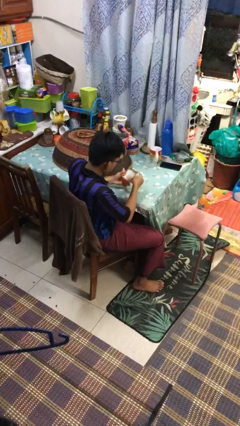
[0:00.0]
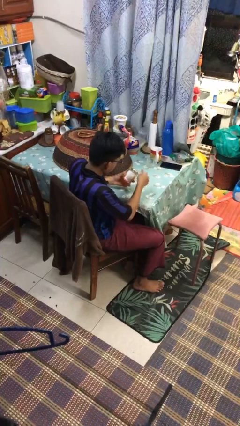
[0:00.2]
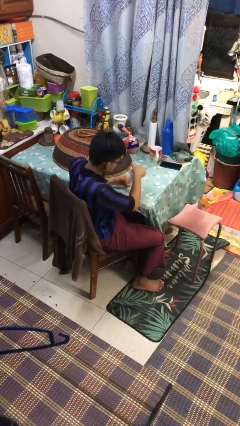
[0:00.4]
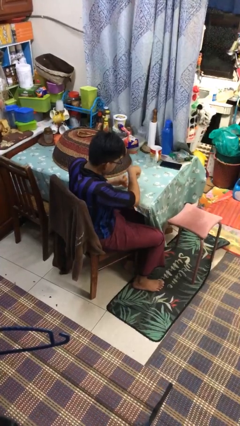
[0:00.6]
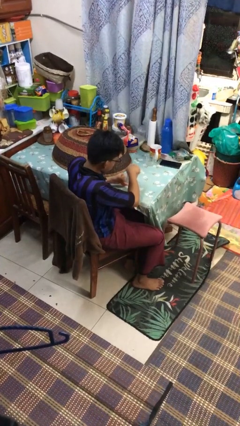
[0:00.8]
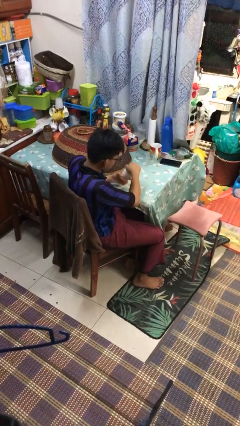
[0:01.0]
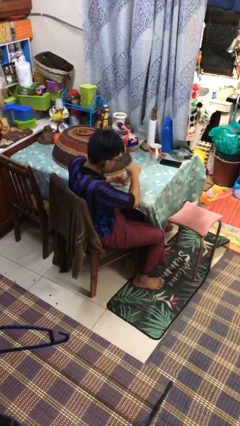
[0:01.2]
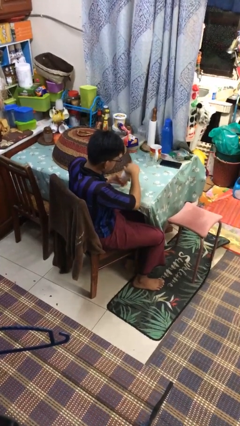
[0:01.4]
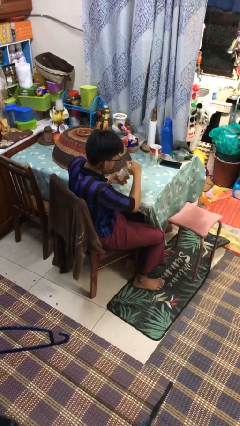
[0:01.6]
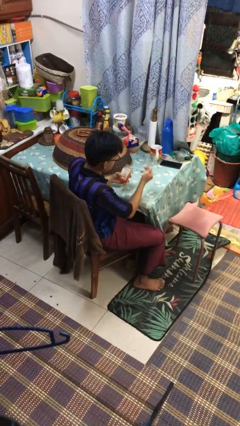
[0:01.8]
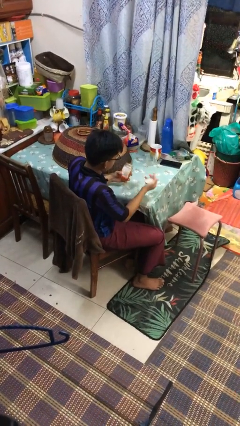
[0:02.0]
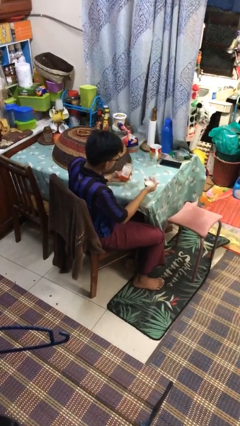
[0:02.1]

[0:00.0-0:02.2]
person opens jar

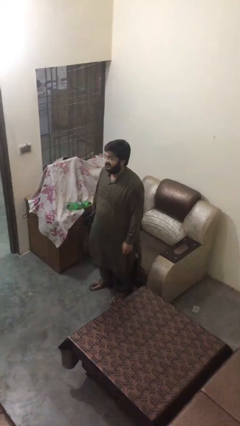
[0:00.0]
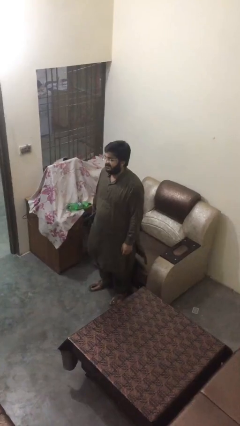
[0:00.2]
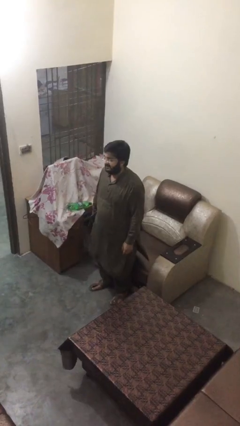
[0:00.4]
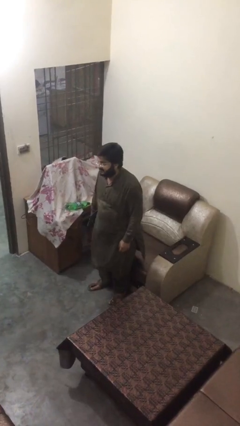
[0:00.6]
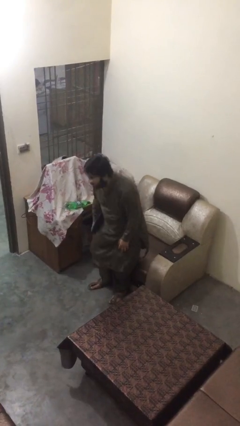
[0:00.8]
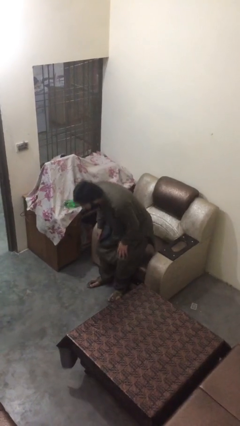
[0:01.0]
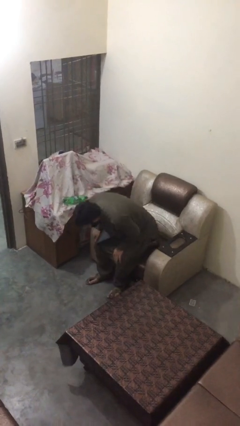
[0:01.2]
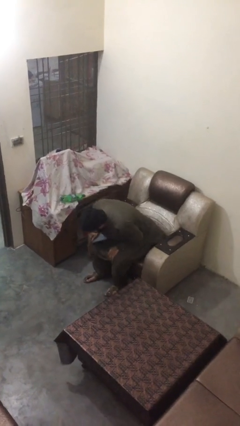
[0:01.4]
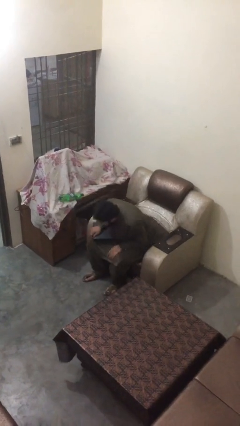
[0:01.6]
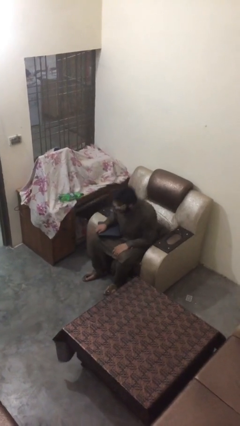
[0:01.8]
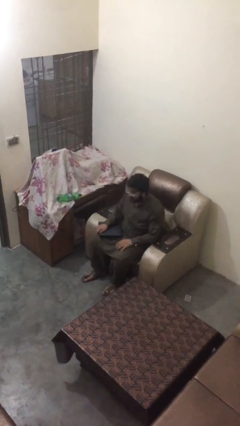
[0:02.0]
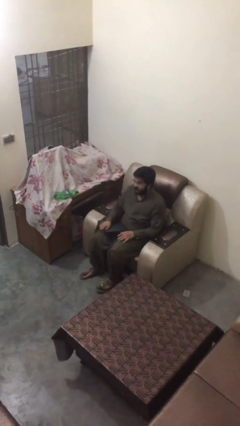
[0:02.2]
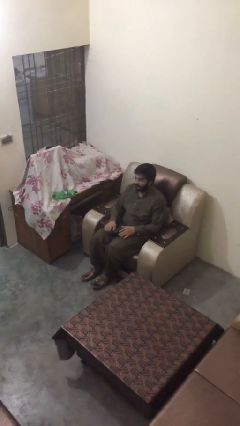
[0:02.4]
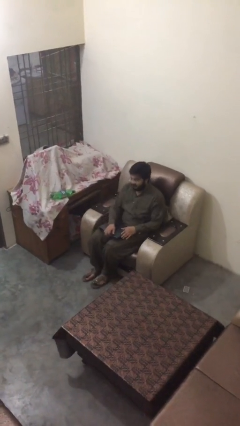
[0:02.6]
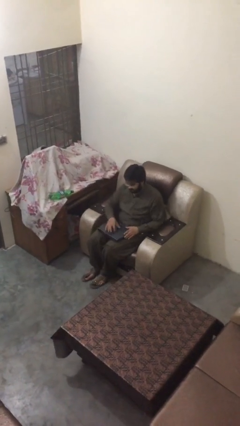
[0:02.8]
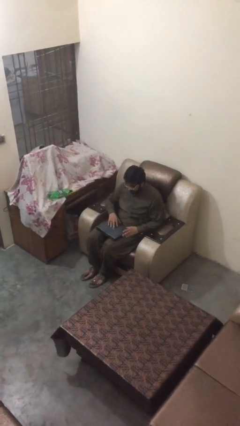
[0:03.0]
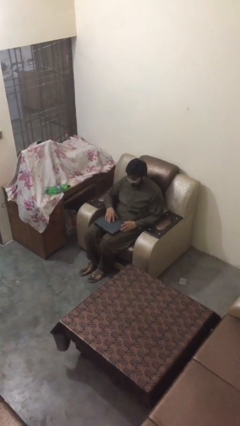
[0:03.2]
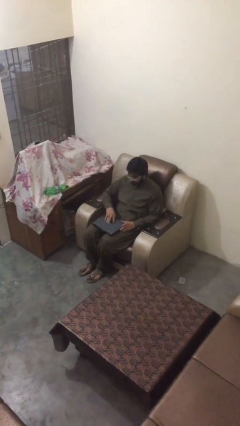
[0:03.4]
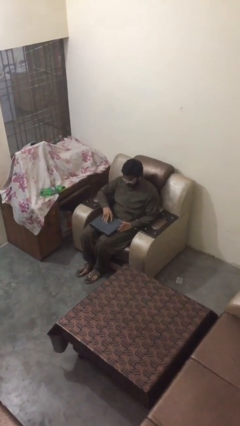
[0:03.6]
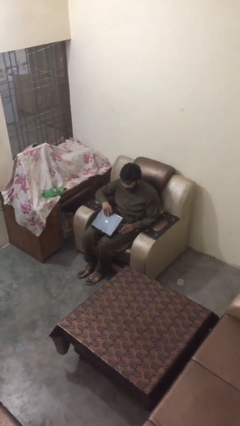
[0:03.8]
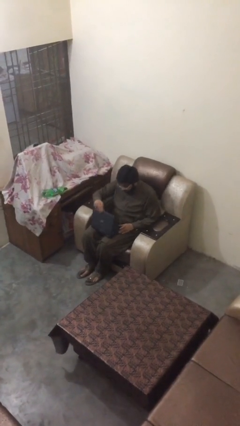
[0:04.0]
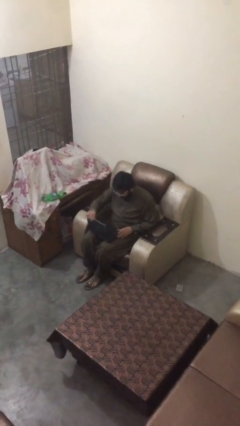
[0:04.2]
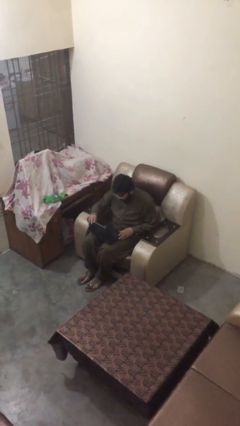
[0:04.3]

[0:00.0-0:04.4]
person sits down

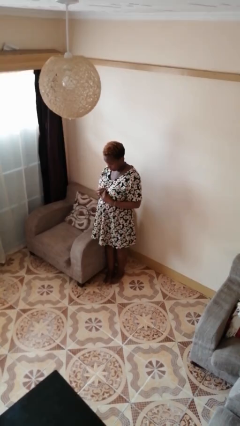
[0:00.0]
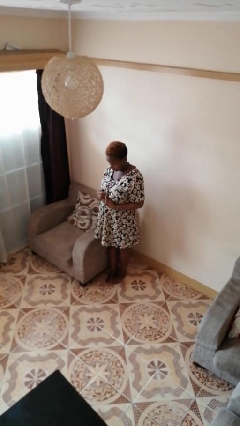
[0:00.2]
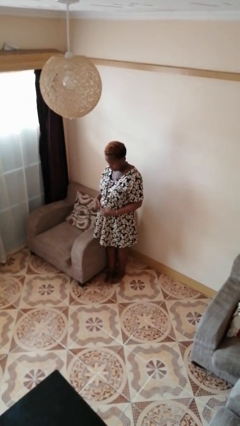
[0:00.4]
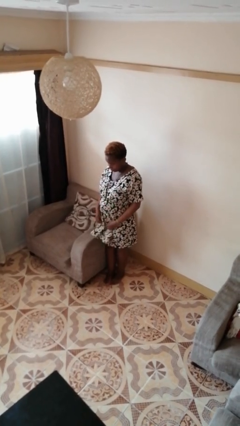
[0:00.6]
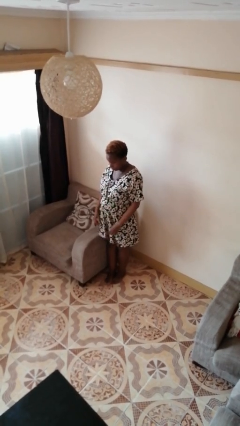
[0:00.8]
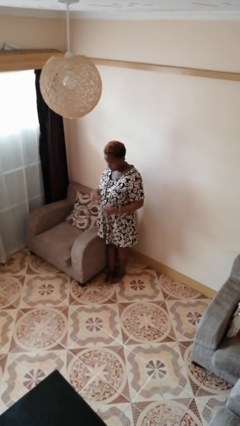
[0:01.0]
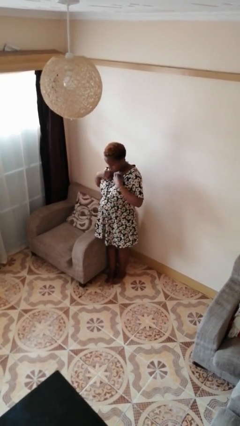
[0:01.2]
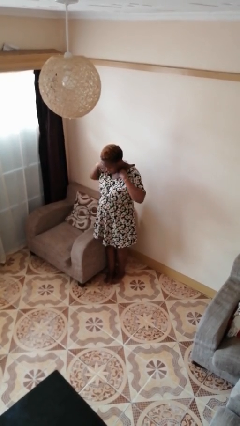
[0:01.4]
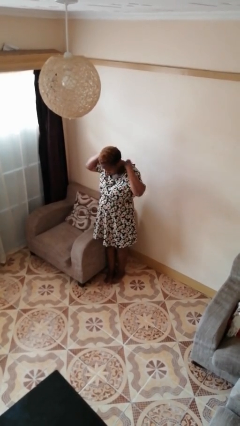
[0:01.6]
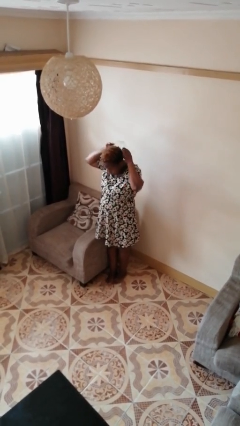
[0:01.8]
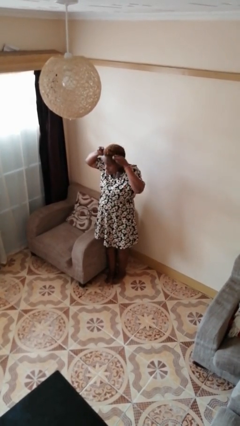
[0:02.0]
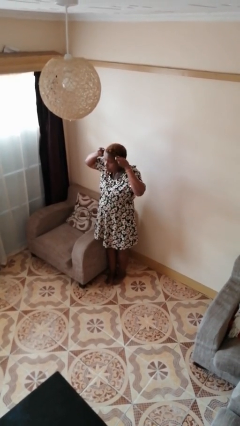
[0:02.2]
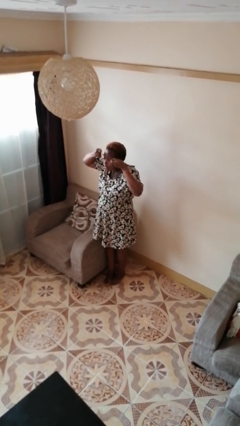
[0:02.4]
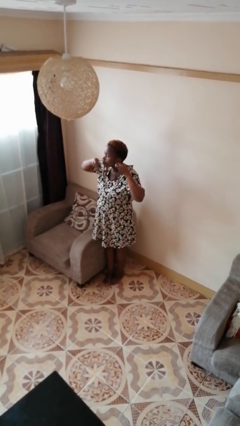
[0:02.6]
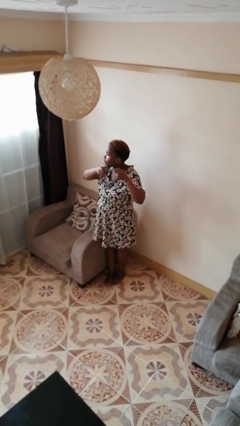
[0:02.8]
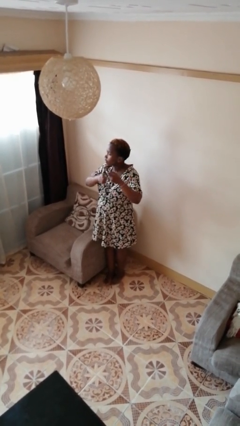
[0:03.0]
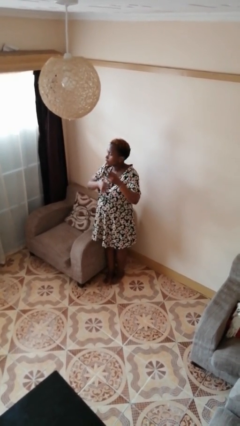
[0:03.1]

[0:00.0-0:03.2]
person takes off necklace

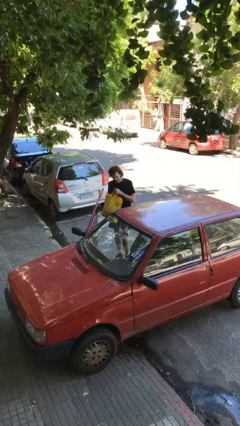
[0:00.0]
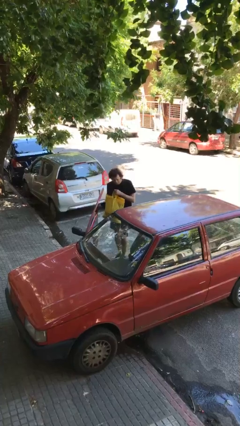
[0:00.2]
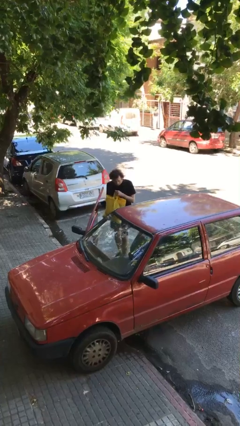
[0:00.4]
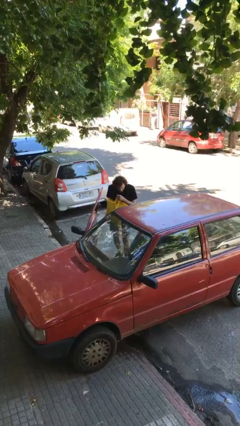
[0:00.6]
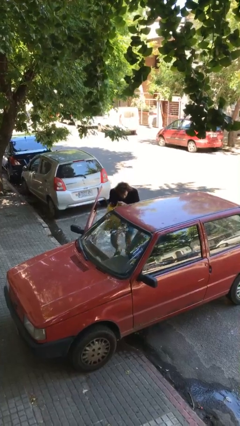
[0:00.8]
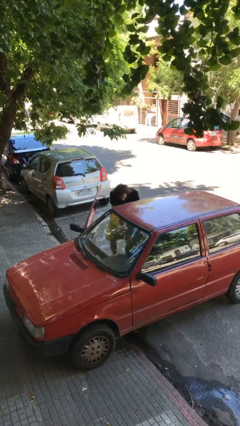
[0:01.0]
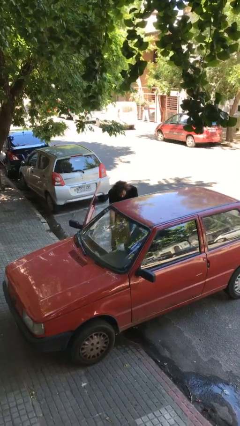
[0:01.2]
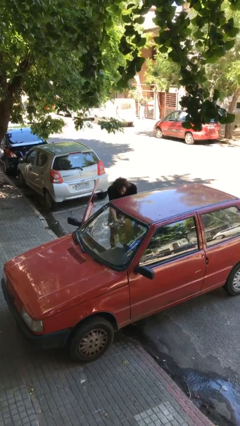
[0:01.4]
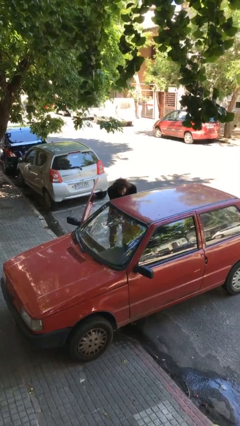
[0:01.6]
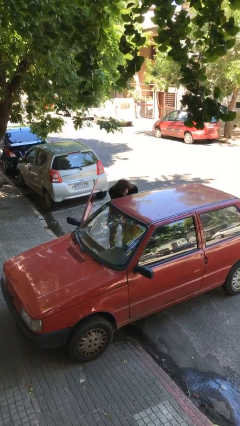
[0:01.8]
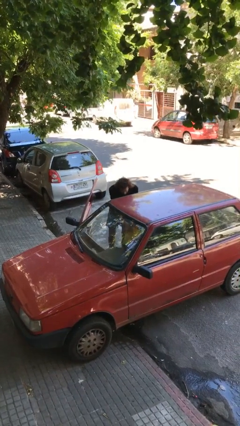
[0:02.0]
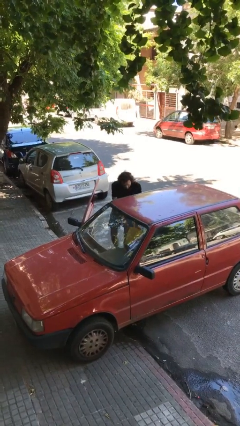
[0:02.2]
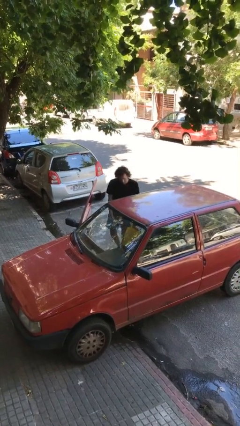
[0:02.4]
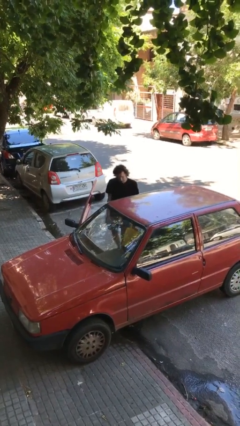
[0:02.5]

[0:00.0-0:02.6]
person loads car

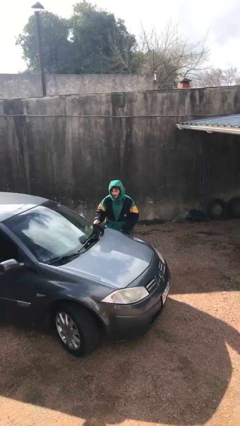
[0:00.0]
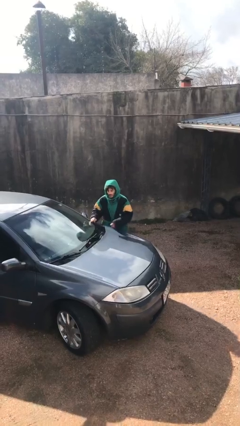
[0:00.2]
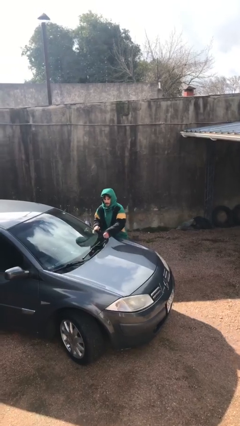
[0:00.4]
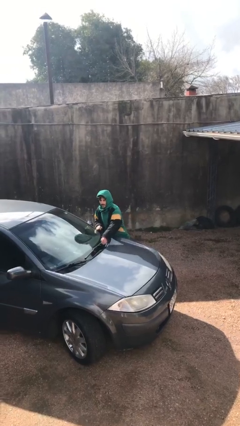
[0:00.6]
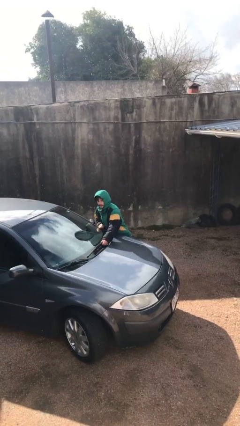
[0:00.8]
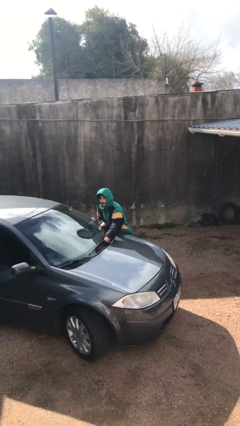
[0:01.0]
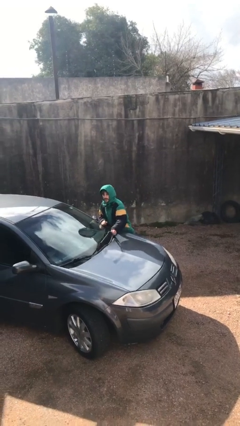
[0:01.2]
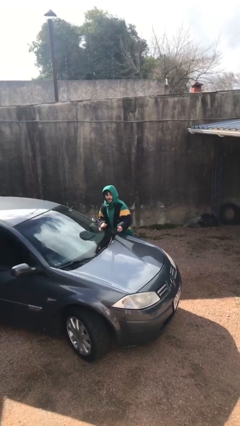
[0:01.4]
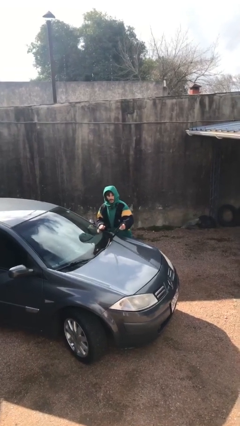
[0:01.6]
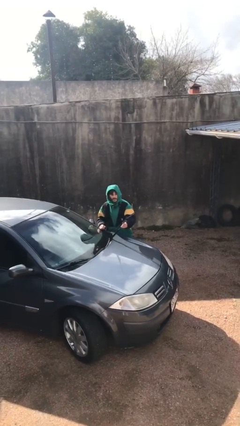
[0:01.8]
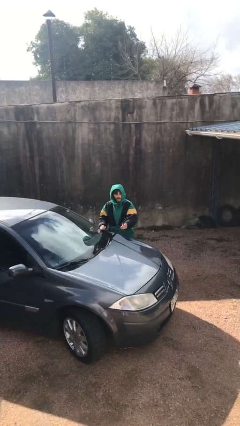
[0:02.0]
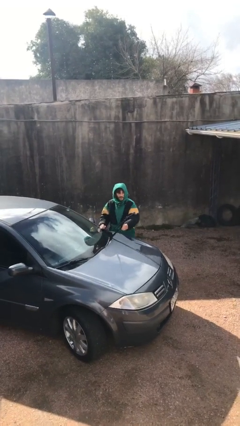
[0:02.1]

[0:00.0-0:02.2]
person flips up car wipers

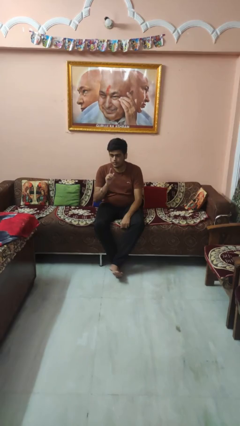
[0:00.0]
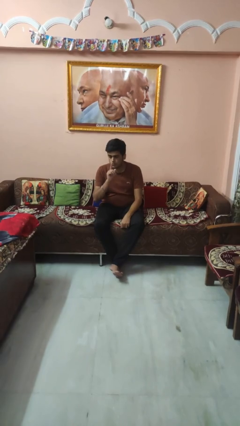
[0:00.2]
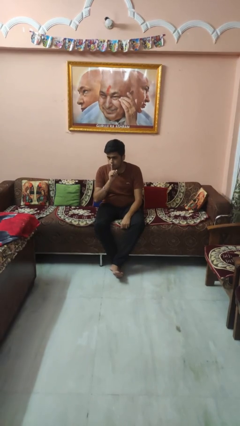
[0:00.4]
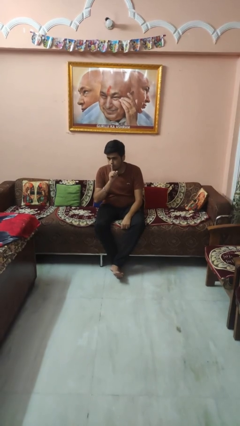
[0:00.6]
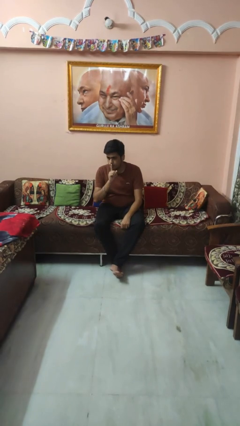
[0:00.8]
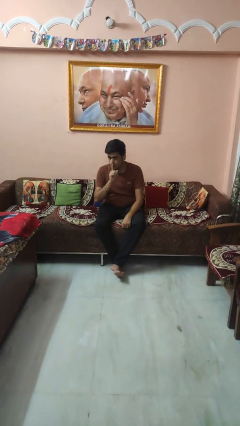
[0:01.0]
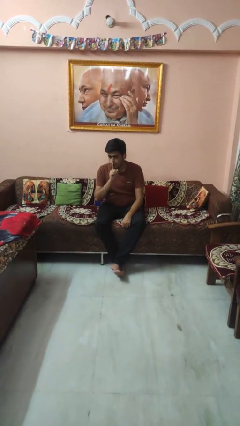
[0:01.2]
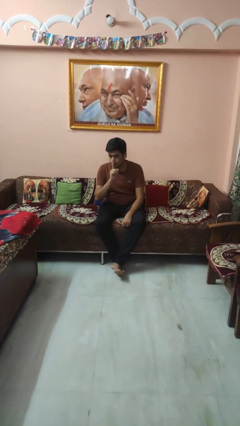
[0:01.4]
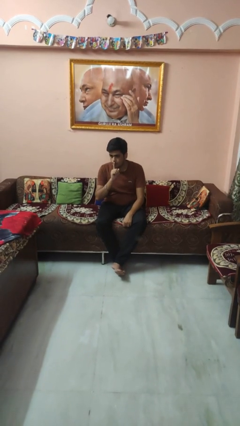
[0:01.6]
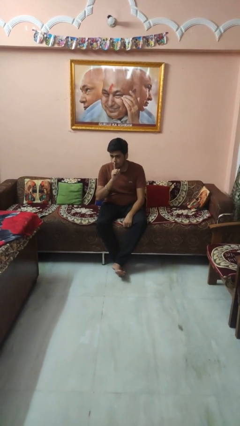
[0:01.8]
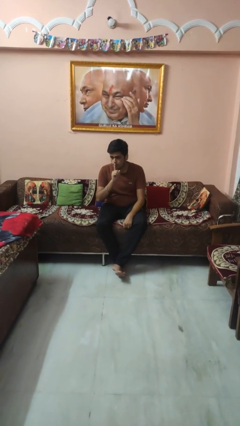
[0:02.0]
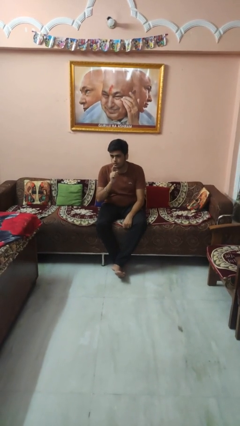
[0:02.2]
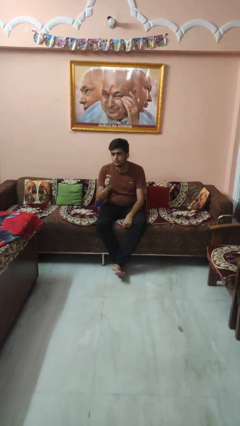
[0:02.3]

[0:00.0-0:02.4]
person gestures be quiet
